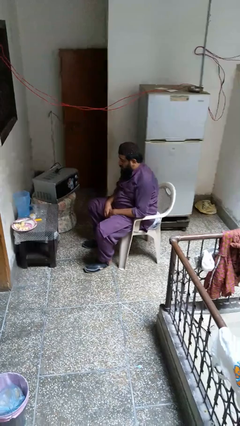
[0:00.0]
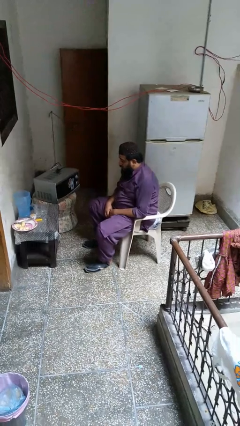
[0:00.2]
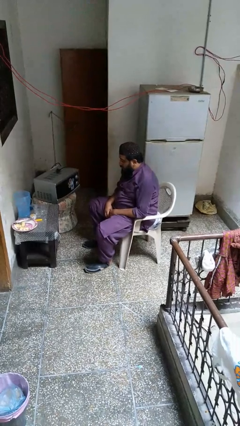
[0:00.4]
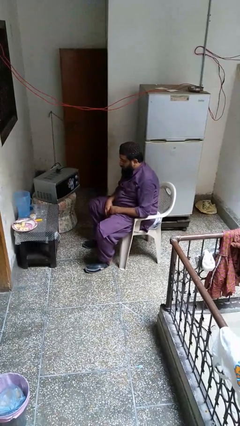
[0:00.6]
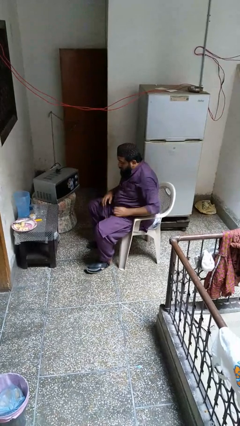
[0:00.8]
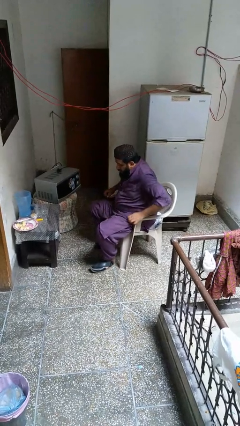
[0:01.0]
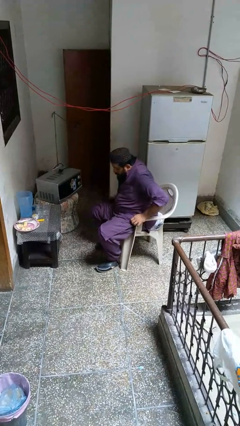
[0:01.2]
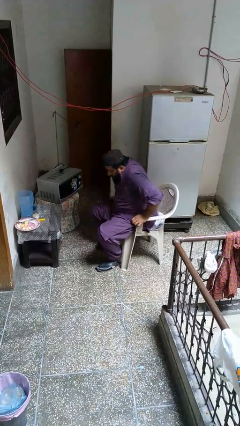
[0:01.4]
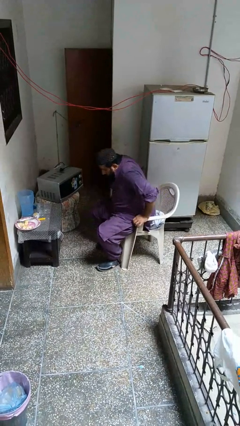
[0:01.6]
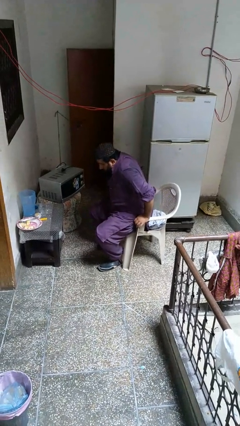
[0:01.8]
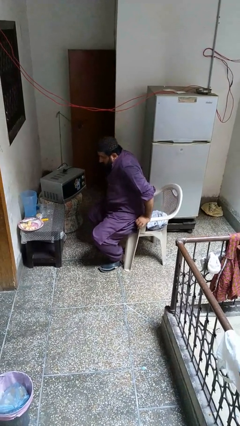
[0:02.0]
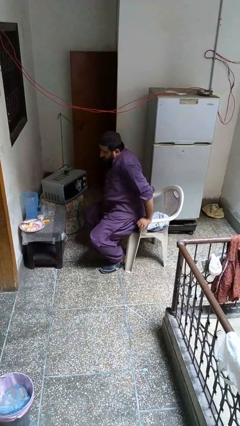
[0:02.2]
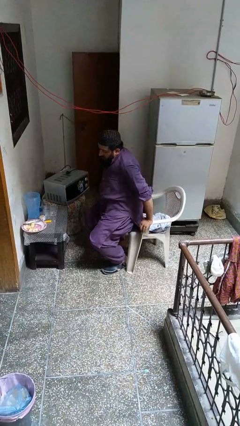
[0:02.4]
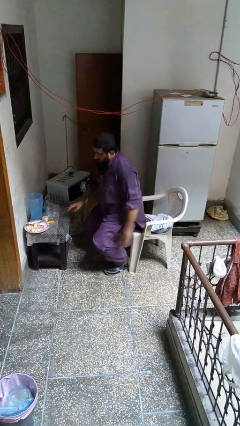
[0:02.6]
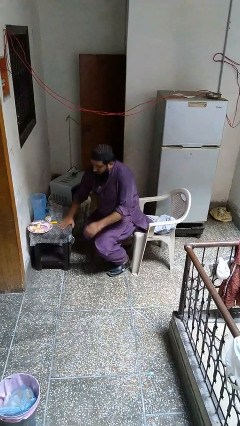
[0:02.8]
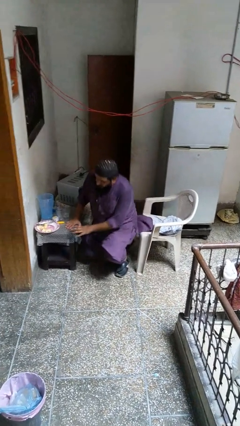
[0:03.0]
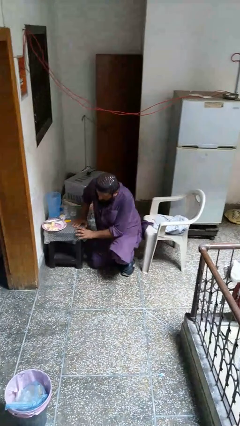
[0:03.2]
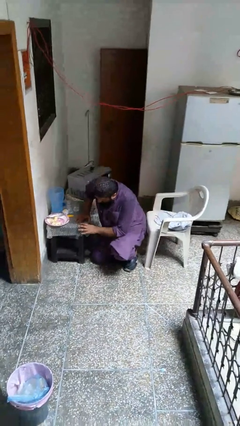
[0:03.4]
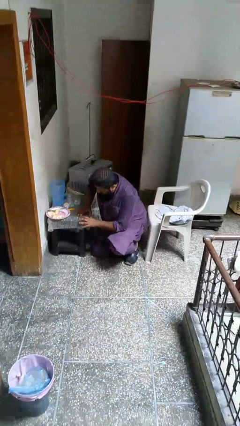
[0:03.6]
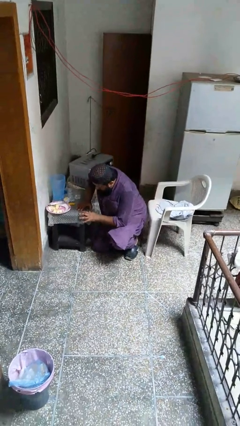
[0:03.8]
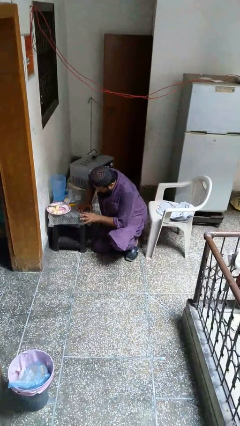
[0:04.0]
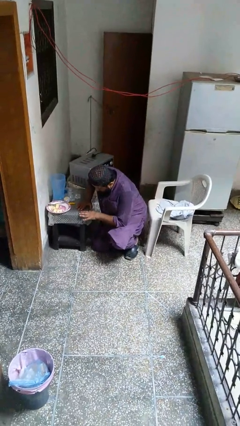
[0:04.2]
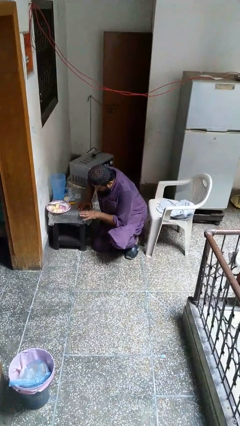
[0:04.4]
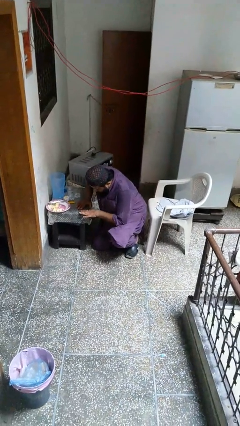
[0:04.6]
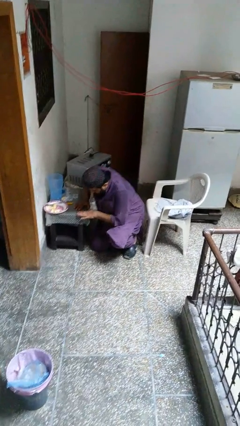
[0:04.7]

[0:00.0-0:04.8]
person falls from chair

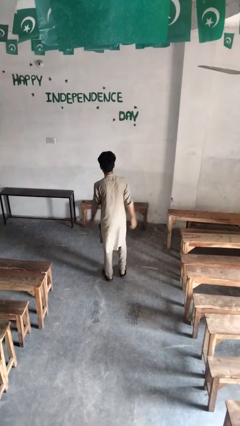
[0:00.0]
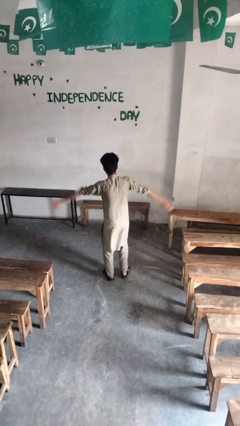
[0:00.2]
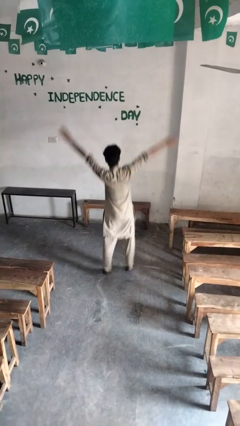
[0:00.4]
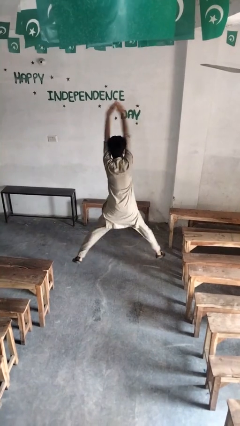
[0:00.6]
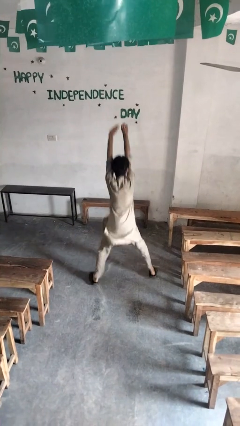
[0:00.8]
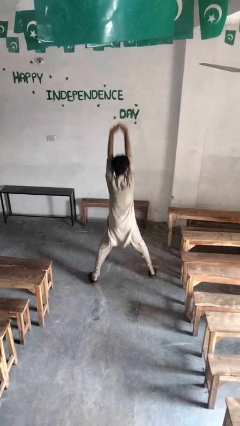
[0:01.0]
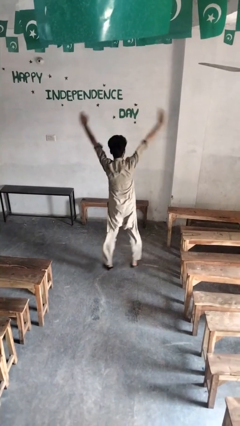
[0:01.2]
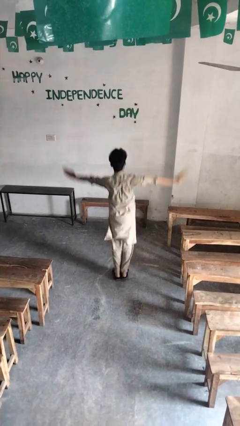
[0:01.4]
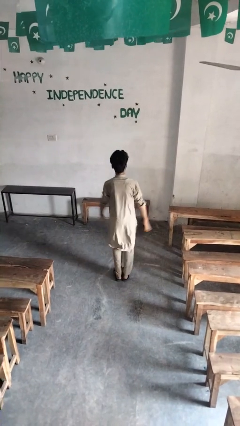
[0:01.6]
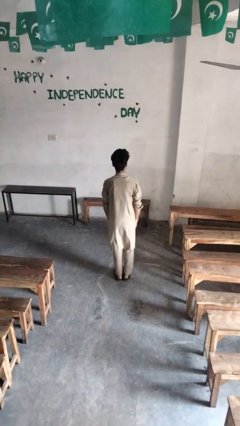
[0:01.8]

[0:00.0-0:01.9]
person exercises with jumping jacks

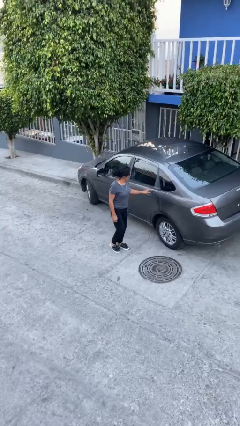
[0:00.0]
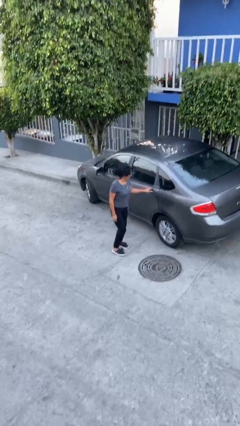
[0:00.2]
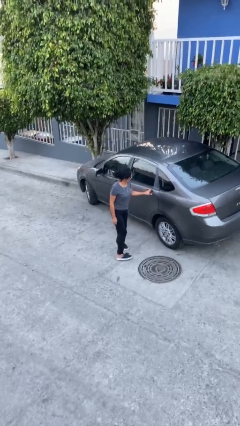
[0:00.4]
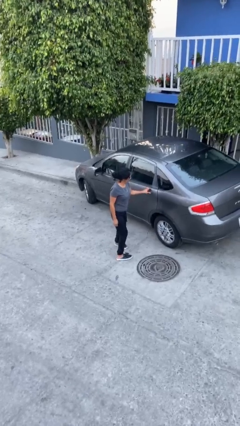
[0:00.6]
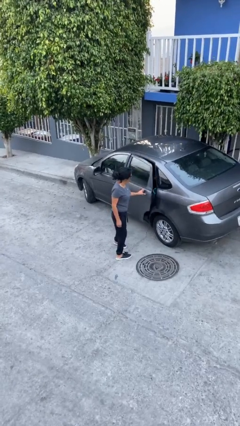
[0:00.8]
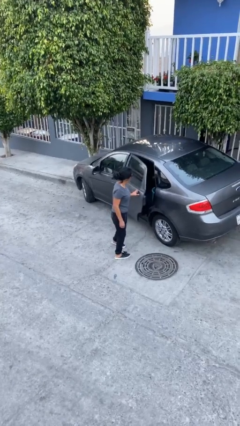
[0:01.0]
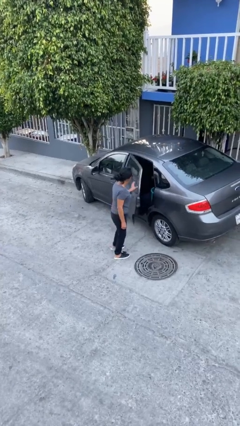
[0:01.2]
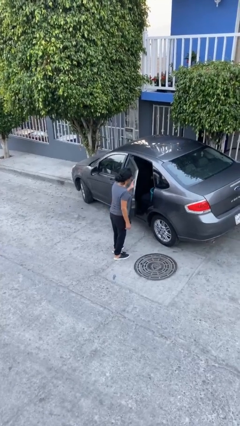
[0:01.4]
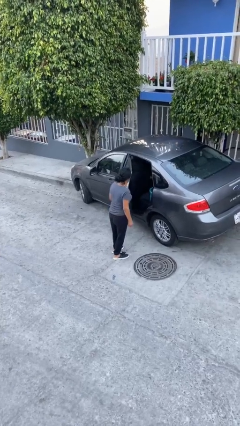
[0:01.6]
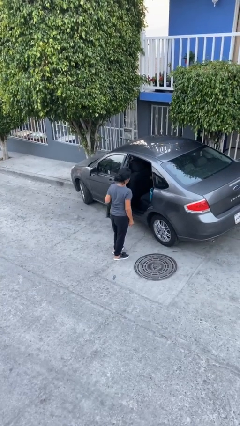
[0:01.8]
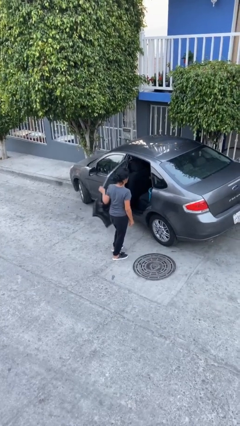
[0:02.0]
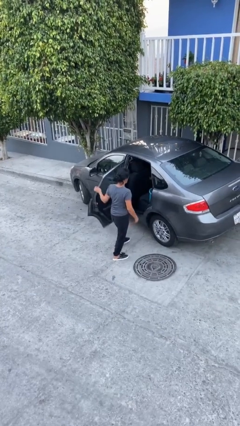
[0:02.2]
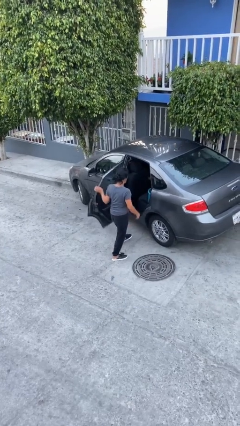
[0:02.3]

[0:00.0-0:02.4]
person opens car door

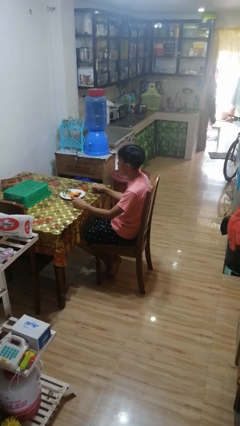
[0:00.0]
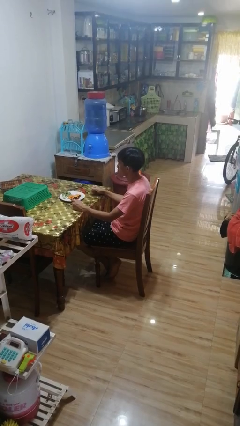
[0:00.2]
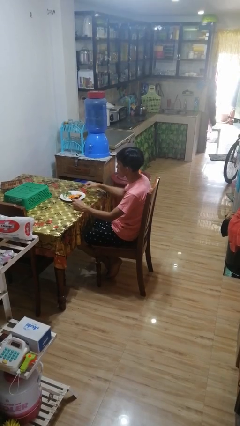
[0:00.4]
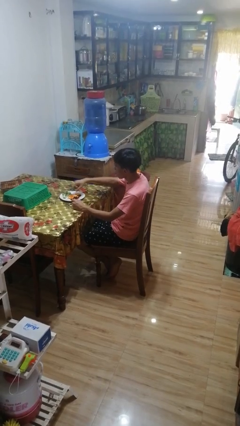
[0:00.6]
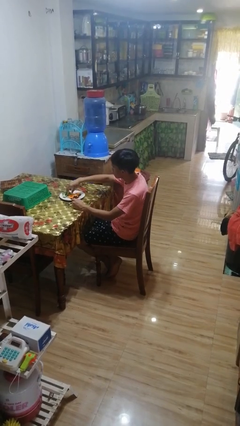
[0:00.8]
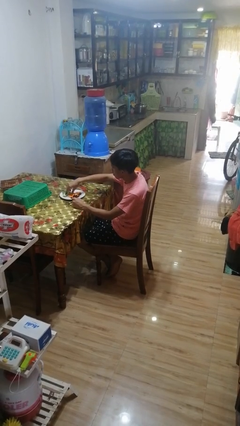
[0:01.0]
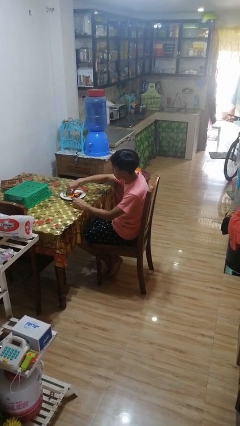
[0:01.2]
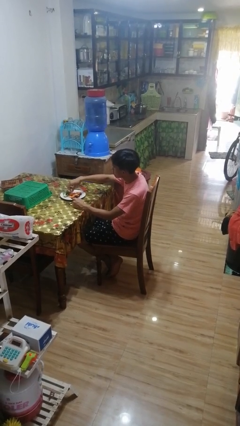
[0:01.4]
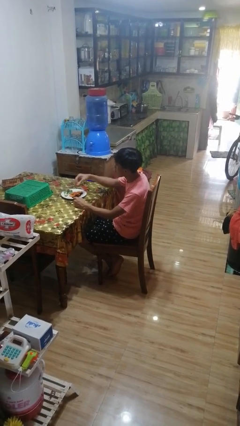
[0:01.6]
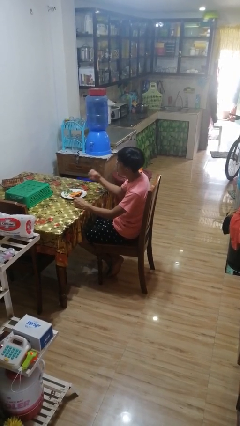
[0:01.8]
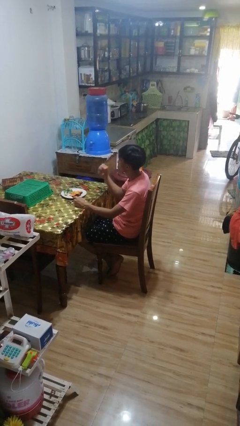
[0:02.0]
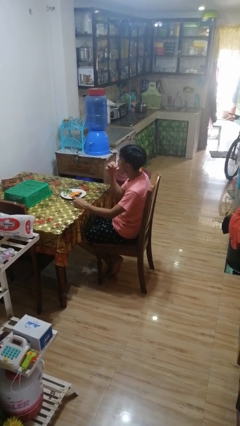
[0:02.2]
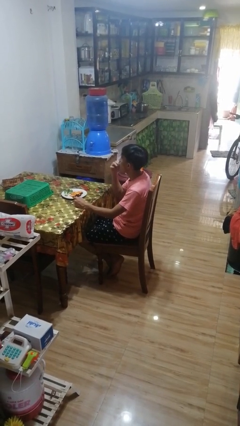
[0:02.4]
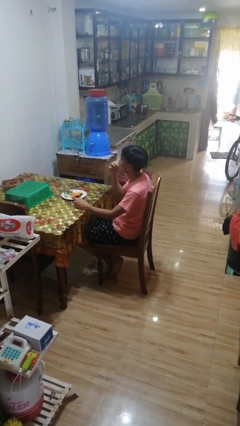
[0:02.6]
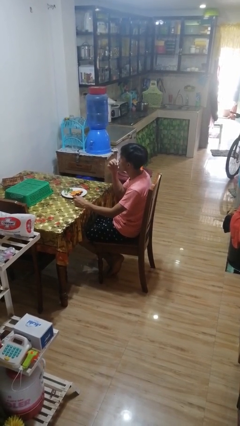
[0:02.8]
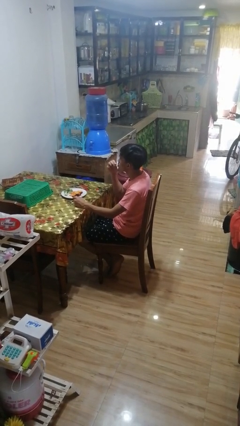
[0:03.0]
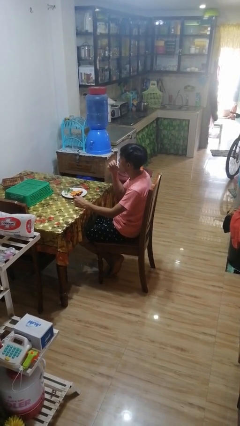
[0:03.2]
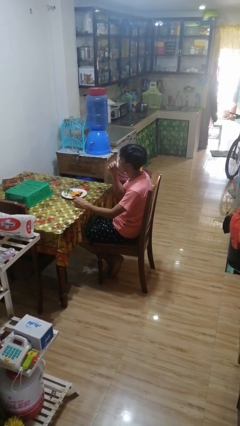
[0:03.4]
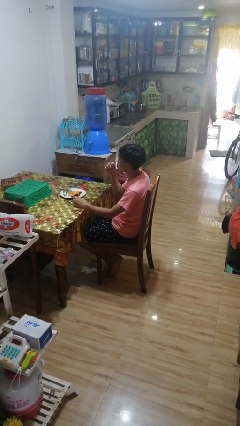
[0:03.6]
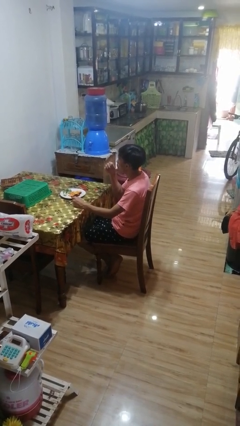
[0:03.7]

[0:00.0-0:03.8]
person eats with hands

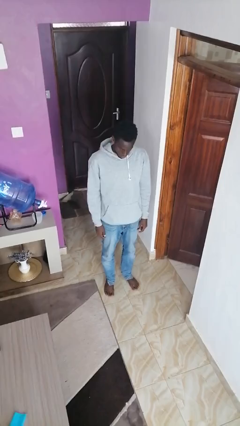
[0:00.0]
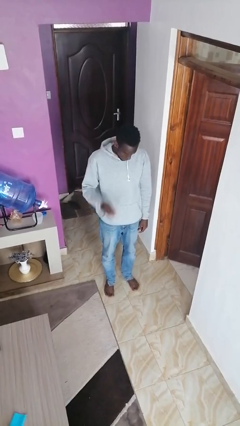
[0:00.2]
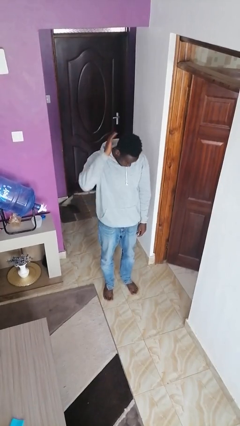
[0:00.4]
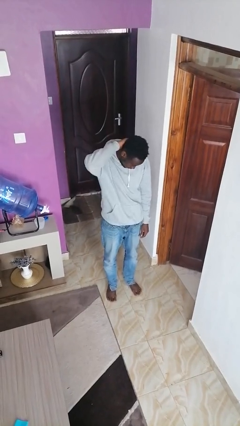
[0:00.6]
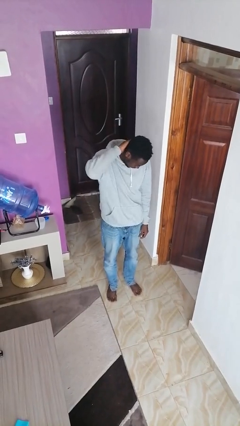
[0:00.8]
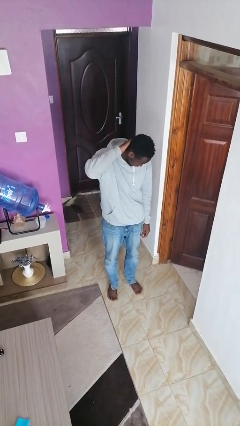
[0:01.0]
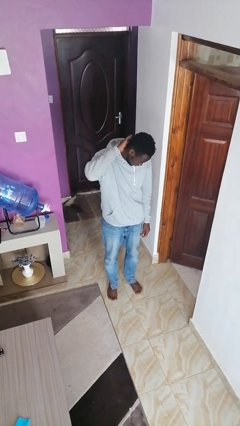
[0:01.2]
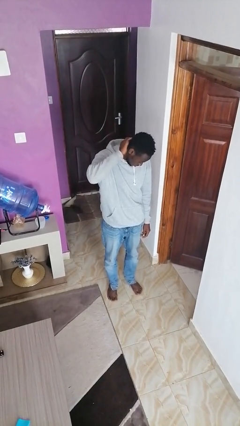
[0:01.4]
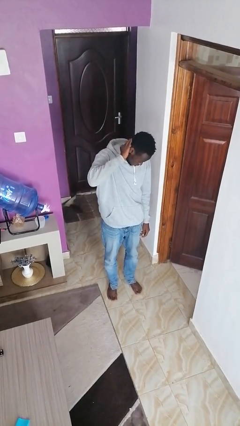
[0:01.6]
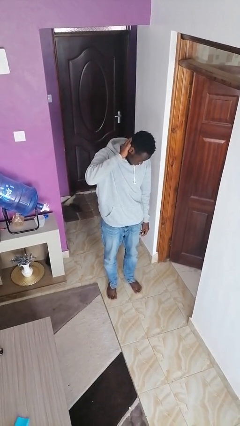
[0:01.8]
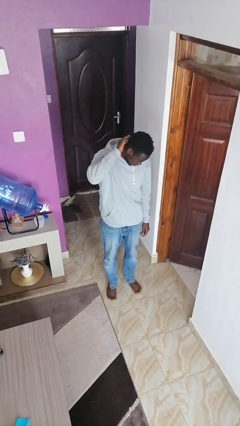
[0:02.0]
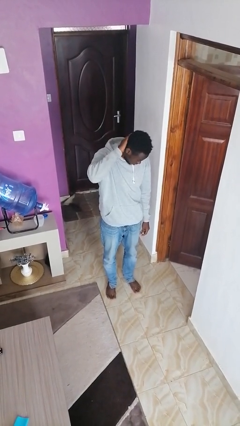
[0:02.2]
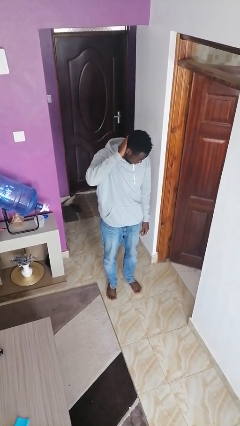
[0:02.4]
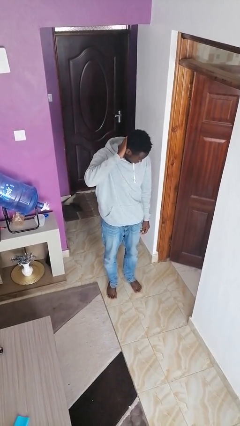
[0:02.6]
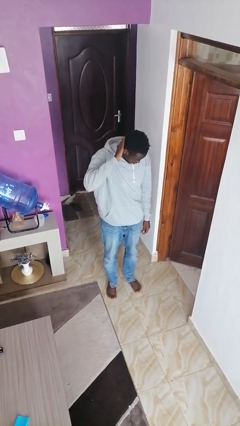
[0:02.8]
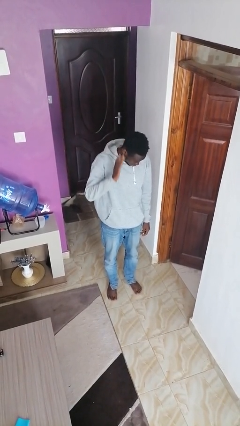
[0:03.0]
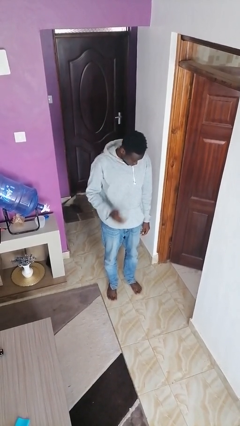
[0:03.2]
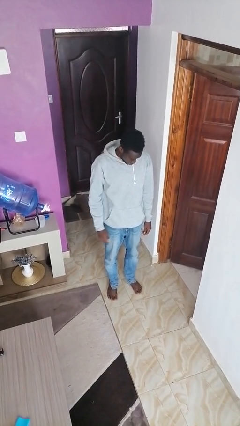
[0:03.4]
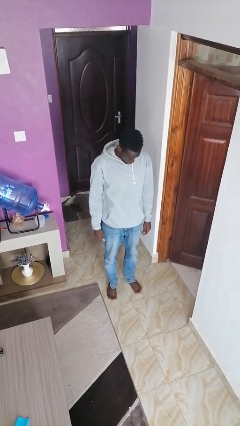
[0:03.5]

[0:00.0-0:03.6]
person strokes hair

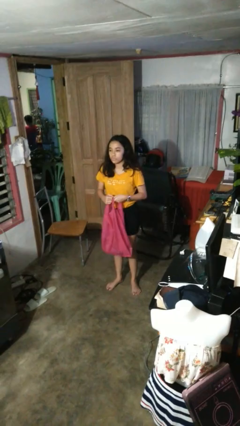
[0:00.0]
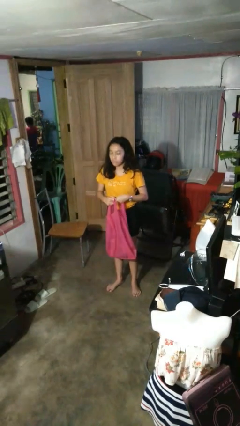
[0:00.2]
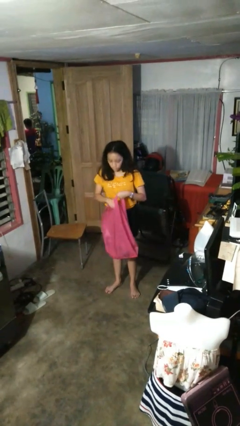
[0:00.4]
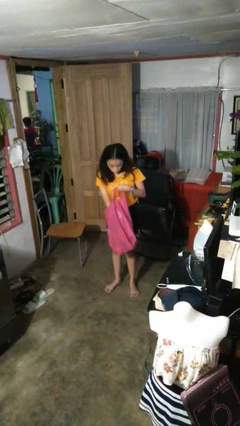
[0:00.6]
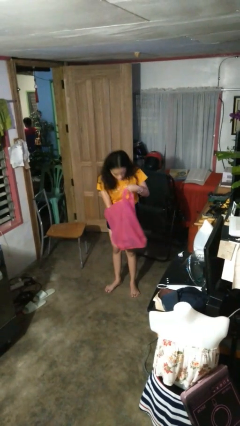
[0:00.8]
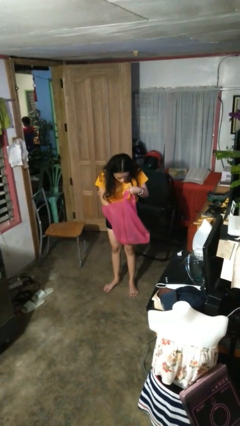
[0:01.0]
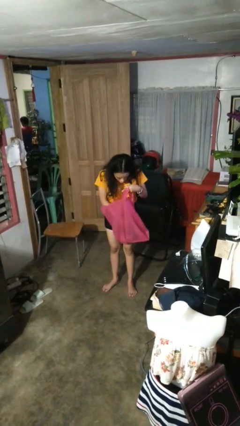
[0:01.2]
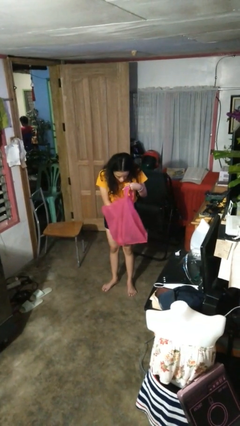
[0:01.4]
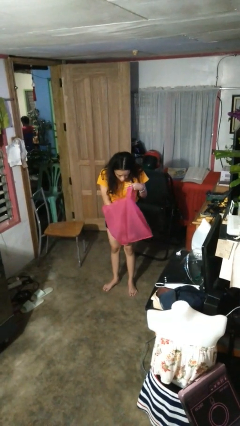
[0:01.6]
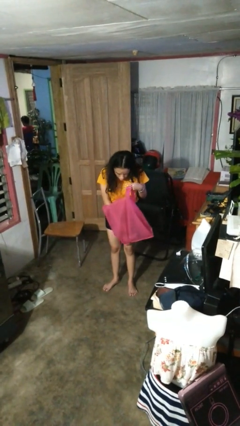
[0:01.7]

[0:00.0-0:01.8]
person searches in bag
